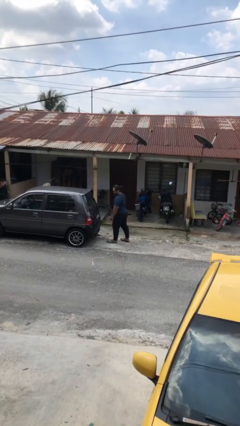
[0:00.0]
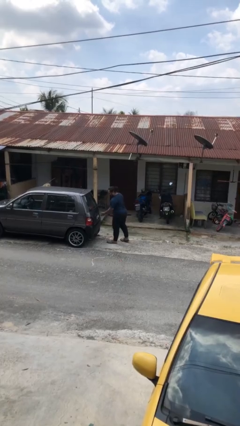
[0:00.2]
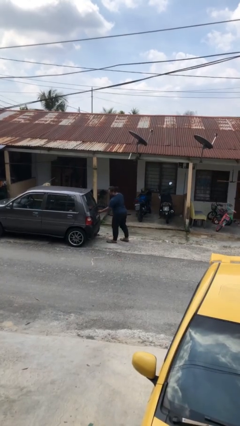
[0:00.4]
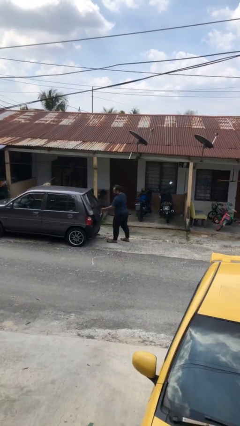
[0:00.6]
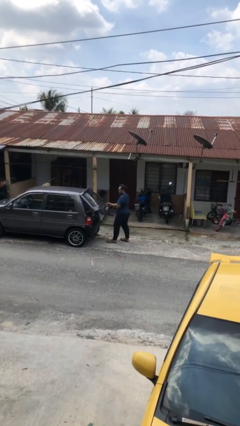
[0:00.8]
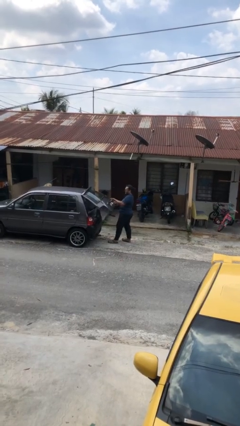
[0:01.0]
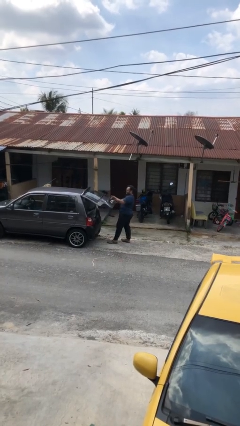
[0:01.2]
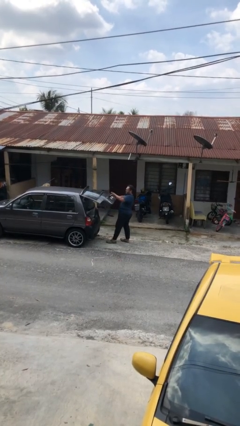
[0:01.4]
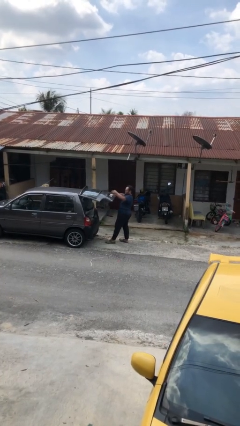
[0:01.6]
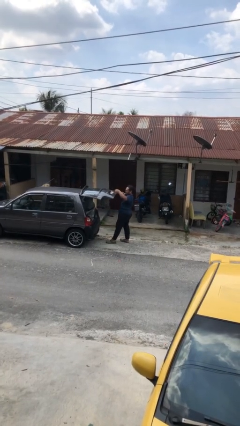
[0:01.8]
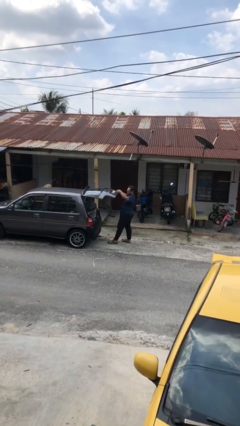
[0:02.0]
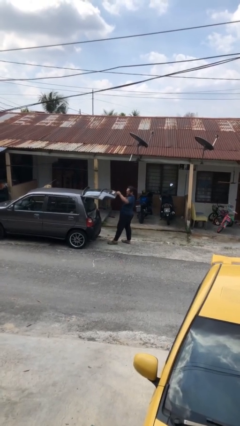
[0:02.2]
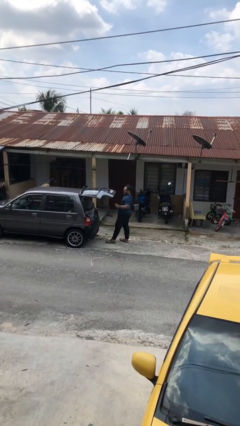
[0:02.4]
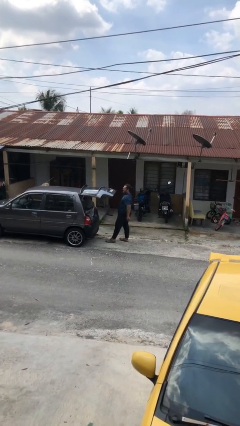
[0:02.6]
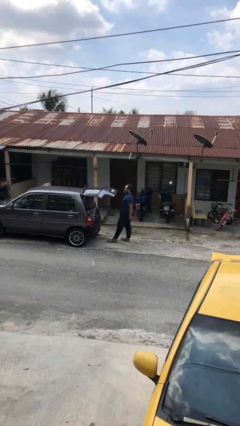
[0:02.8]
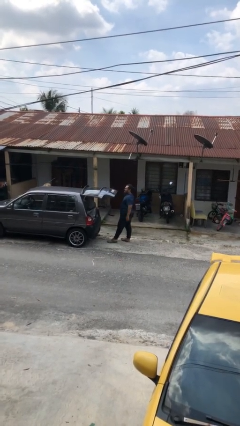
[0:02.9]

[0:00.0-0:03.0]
person opens car trunk

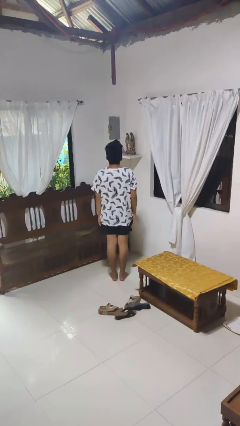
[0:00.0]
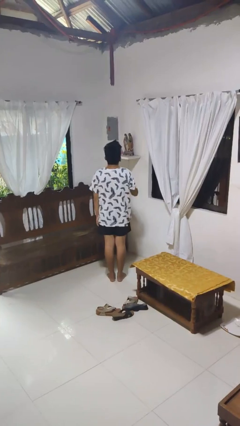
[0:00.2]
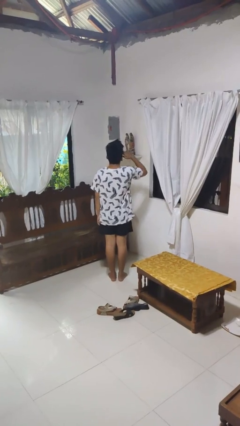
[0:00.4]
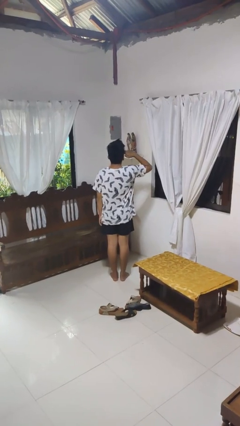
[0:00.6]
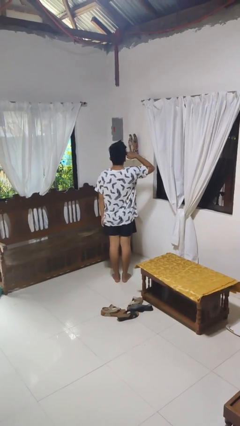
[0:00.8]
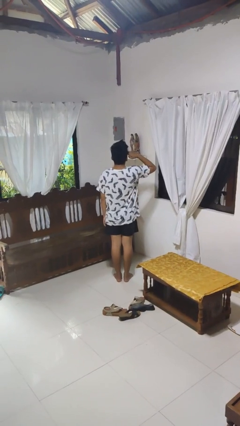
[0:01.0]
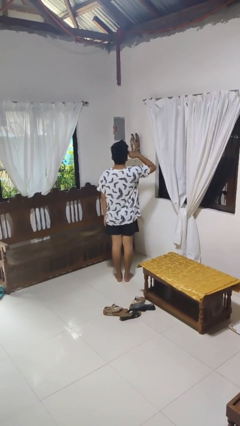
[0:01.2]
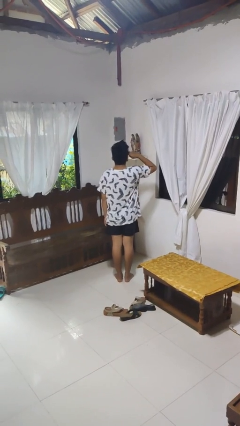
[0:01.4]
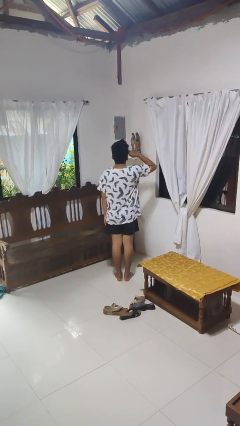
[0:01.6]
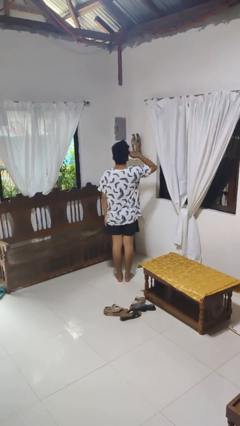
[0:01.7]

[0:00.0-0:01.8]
person salutes

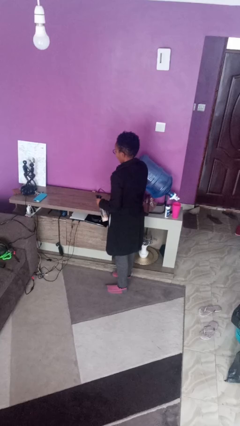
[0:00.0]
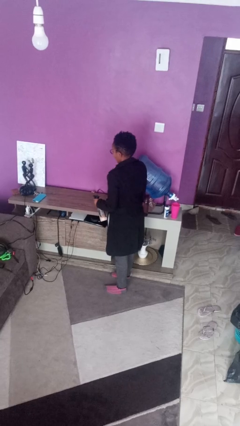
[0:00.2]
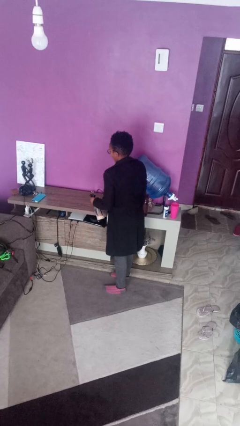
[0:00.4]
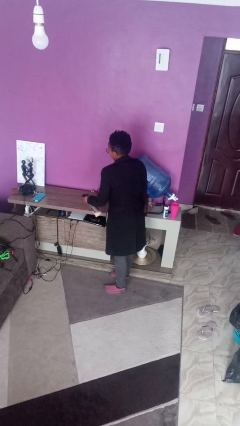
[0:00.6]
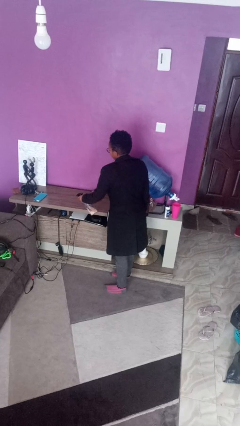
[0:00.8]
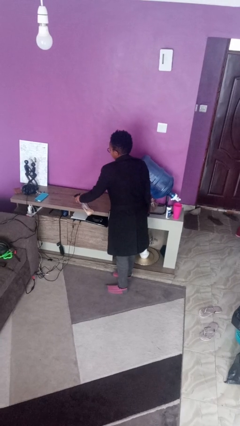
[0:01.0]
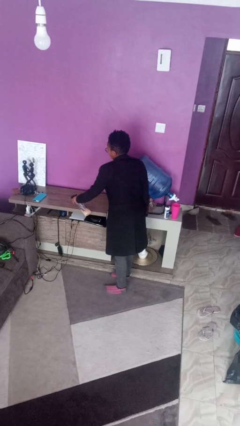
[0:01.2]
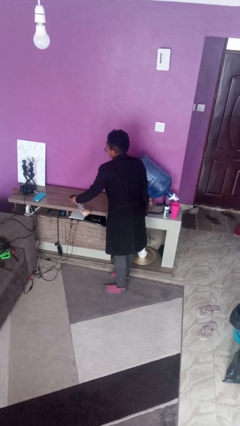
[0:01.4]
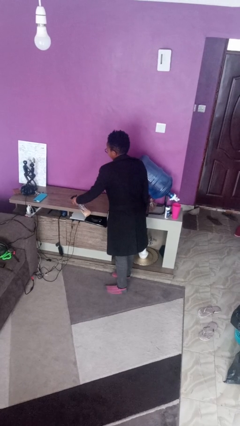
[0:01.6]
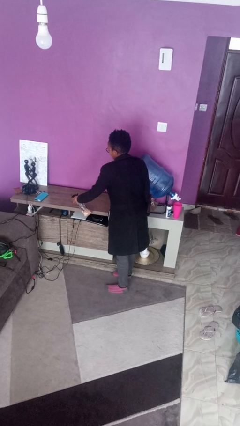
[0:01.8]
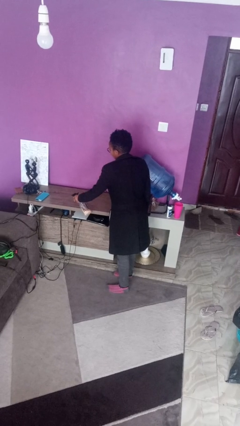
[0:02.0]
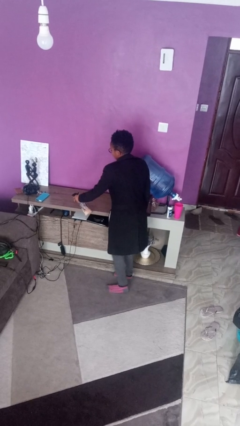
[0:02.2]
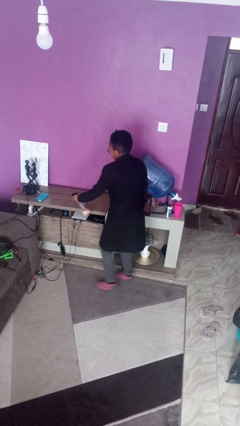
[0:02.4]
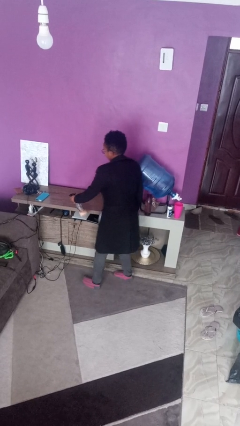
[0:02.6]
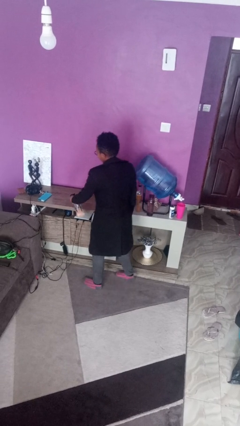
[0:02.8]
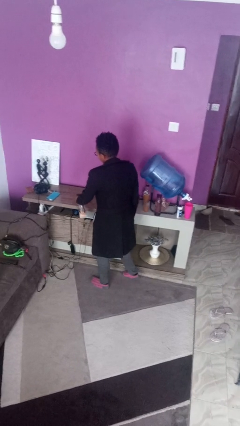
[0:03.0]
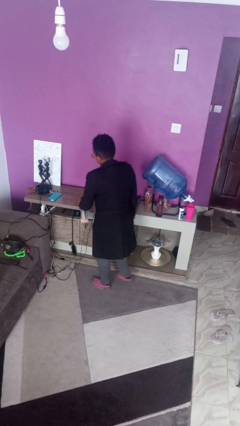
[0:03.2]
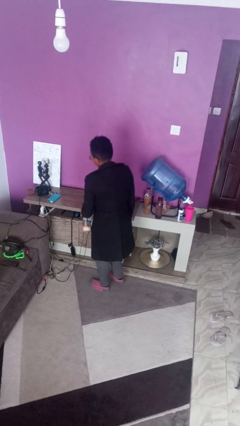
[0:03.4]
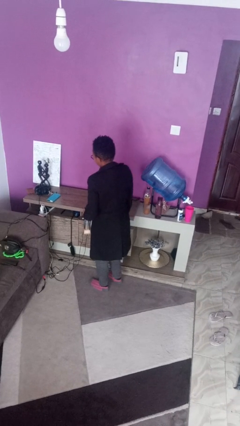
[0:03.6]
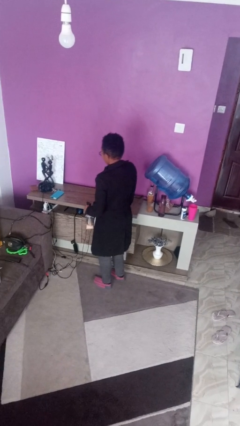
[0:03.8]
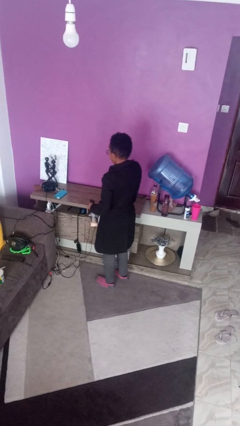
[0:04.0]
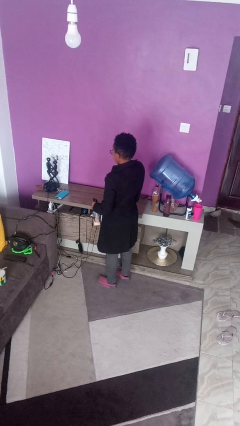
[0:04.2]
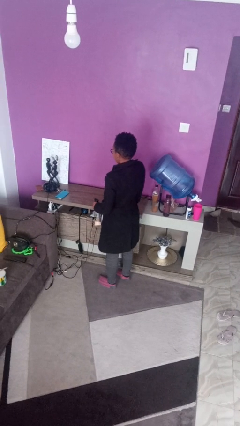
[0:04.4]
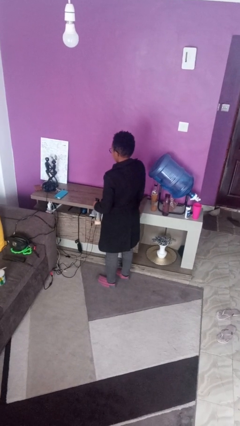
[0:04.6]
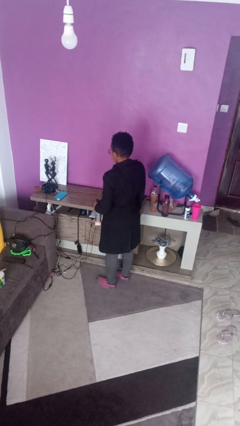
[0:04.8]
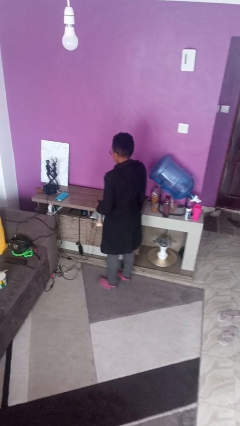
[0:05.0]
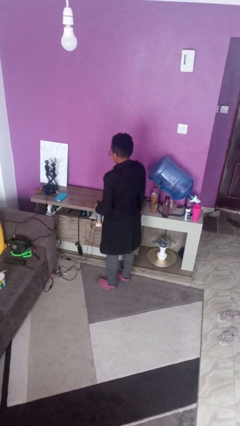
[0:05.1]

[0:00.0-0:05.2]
person sprays from bottle

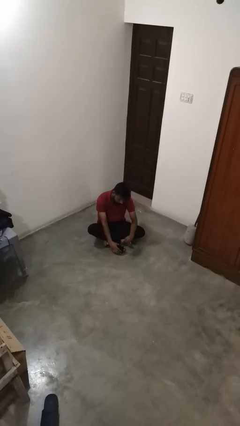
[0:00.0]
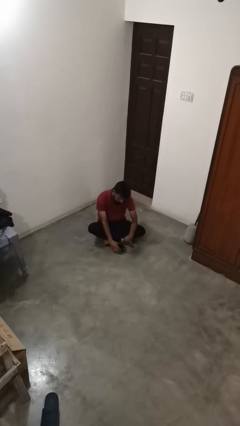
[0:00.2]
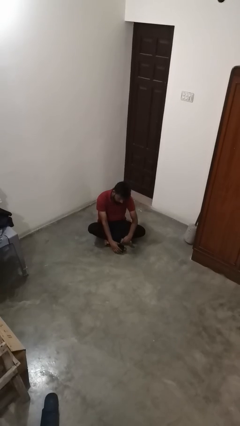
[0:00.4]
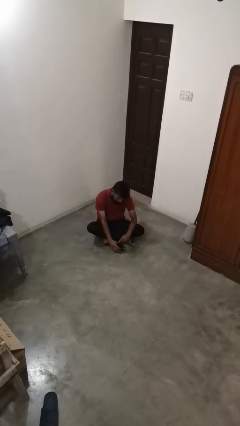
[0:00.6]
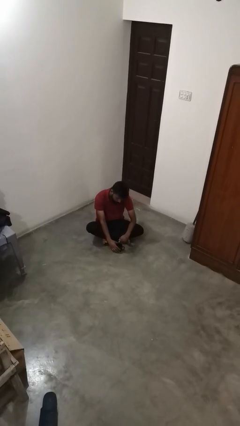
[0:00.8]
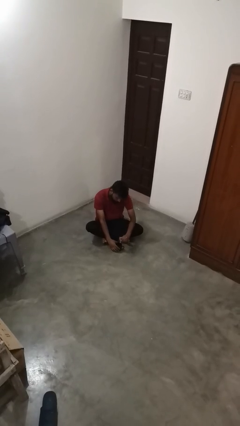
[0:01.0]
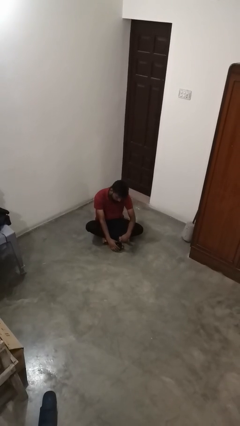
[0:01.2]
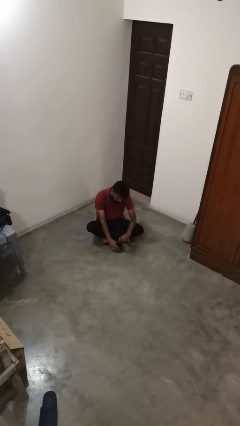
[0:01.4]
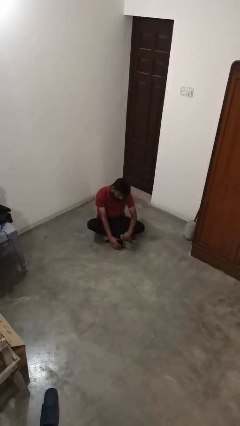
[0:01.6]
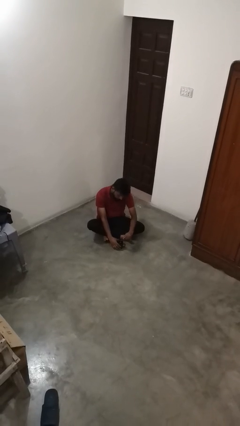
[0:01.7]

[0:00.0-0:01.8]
person stirs mug

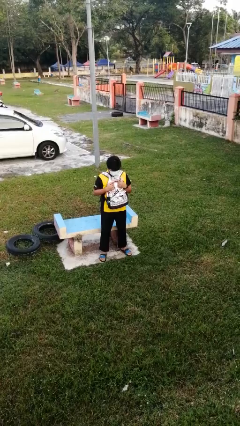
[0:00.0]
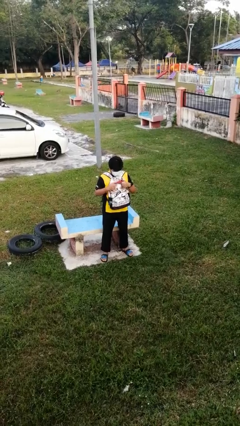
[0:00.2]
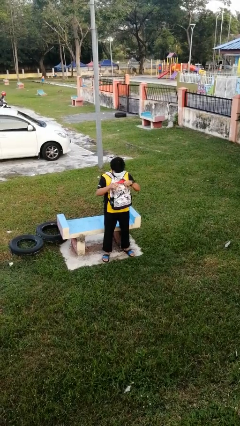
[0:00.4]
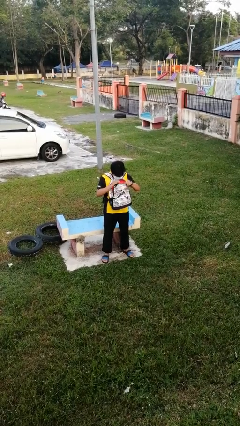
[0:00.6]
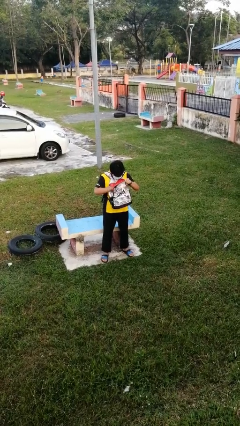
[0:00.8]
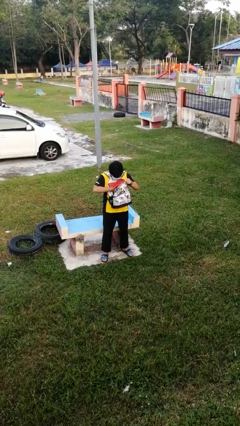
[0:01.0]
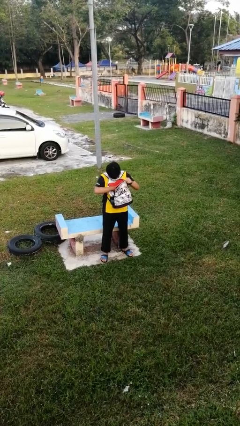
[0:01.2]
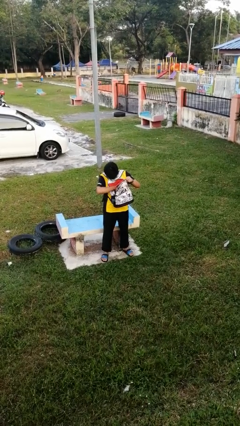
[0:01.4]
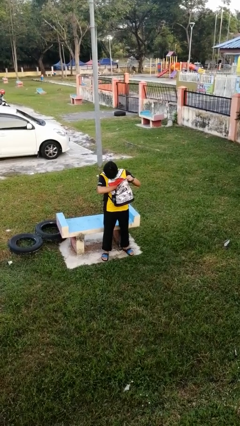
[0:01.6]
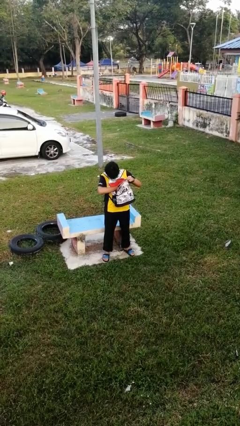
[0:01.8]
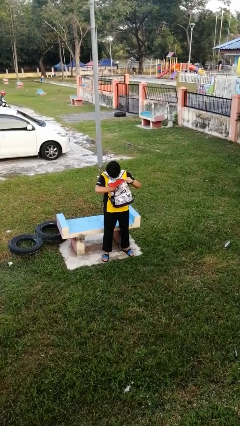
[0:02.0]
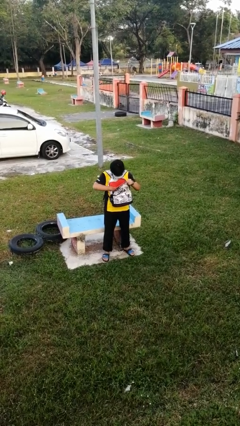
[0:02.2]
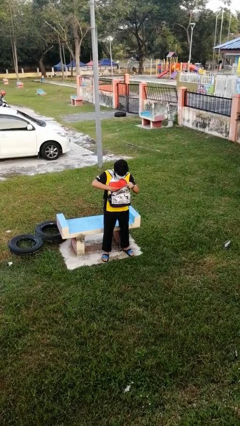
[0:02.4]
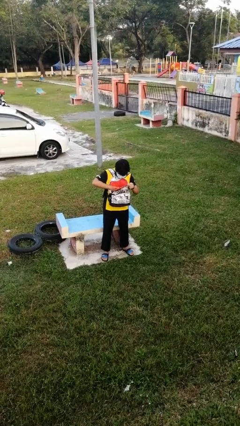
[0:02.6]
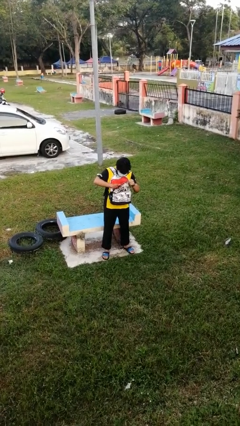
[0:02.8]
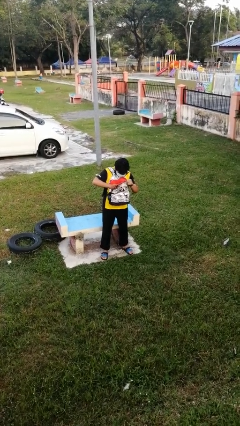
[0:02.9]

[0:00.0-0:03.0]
person searches in backpack

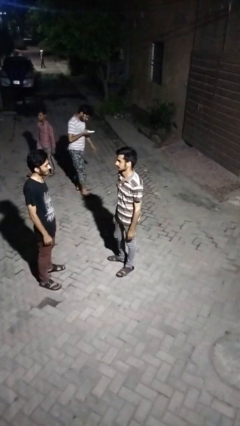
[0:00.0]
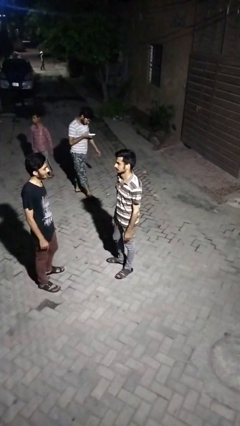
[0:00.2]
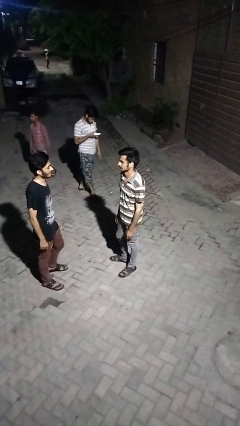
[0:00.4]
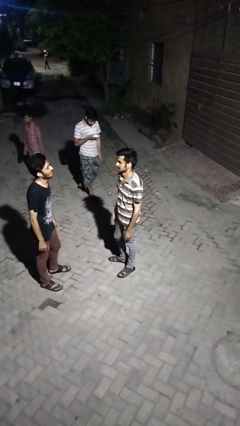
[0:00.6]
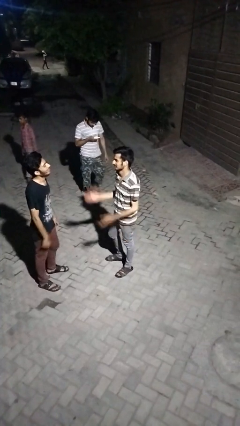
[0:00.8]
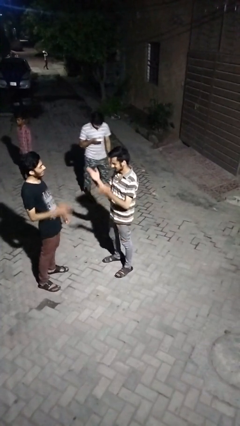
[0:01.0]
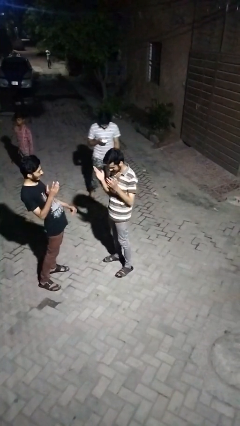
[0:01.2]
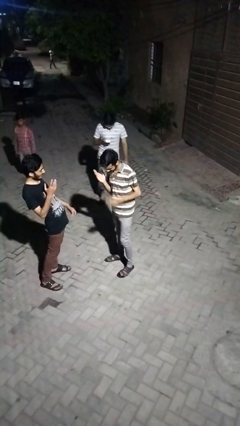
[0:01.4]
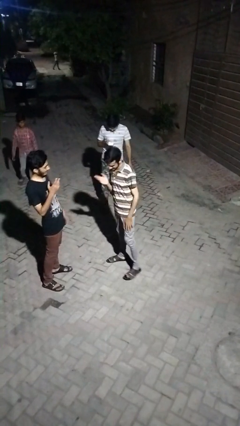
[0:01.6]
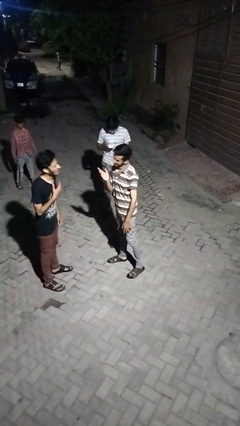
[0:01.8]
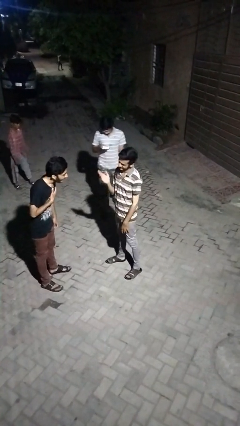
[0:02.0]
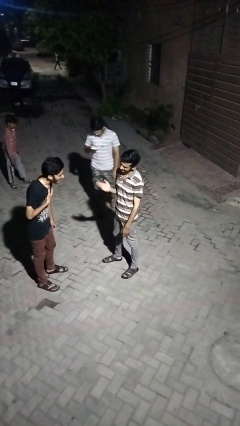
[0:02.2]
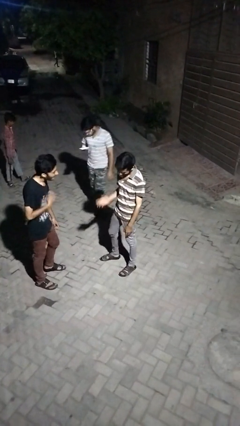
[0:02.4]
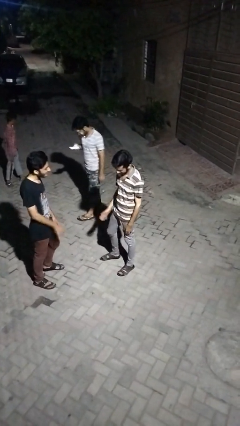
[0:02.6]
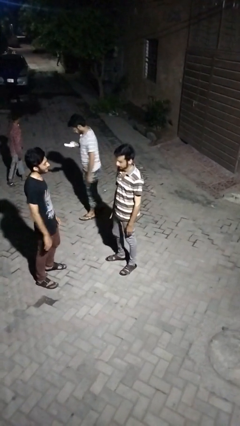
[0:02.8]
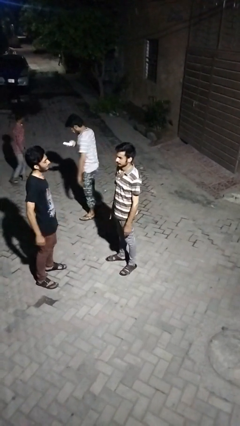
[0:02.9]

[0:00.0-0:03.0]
person laughs with person
